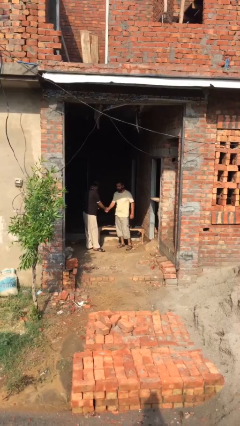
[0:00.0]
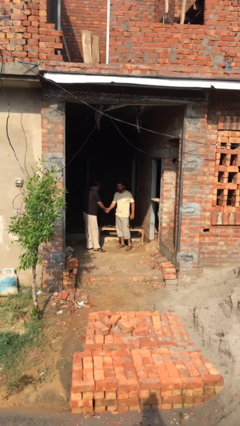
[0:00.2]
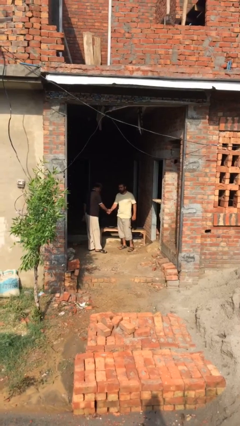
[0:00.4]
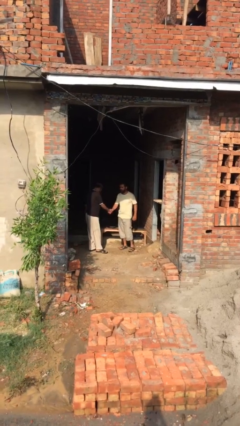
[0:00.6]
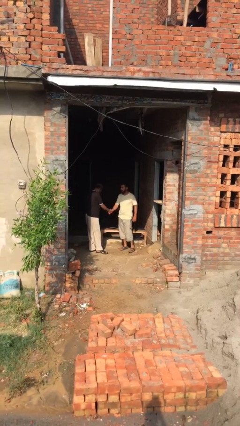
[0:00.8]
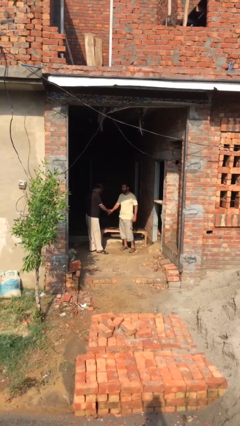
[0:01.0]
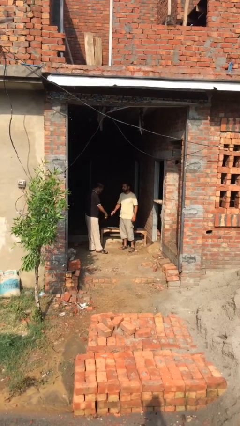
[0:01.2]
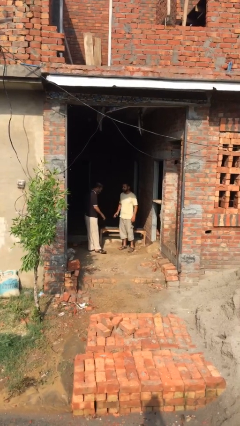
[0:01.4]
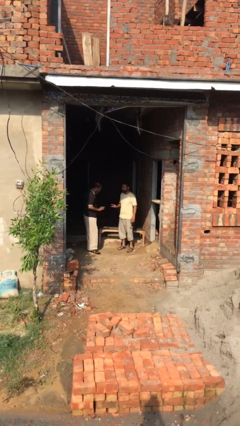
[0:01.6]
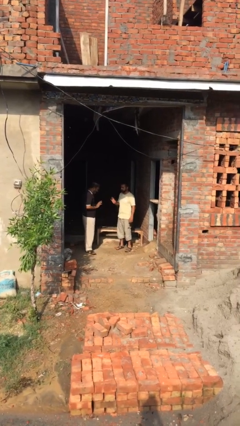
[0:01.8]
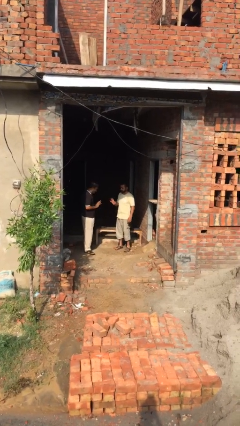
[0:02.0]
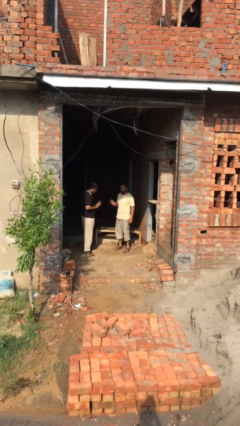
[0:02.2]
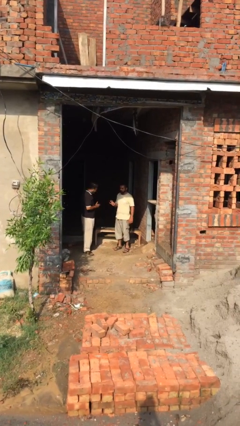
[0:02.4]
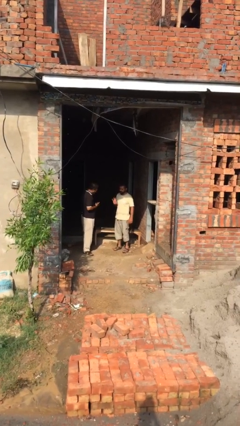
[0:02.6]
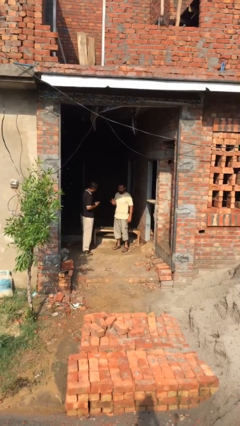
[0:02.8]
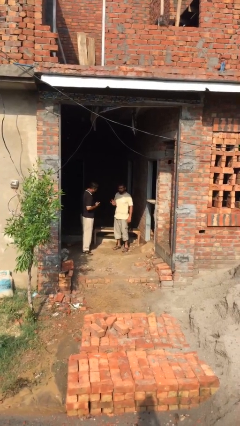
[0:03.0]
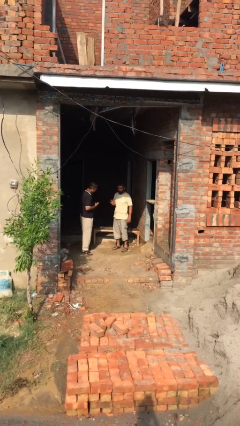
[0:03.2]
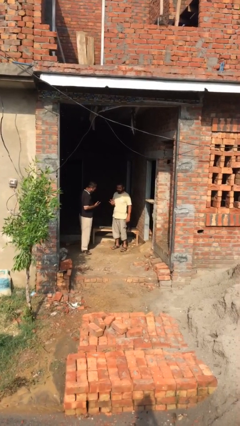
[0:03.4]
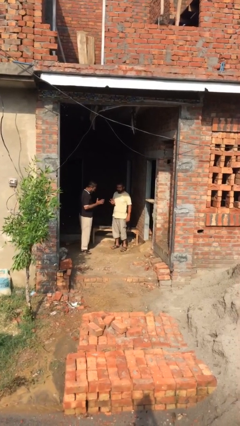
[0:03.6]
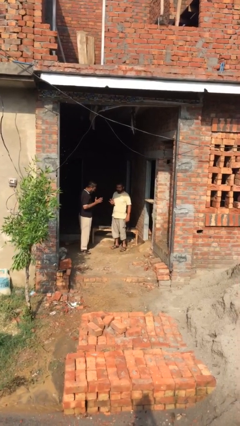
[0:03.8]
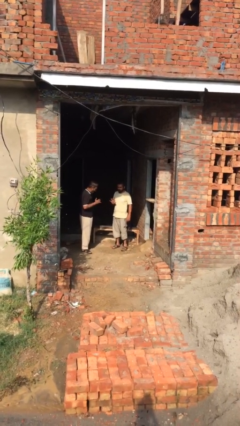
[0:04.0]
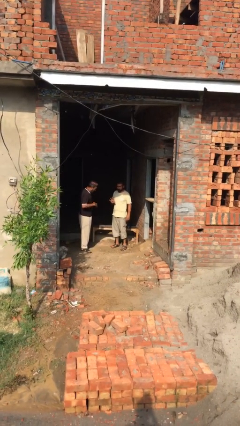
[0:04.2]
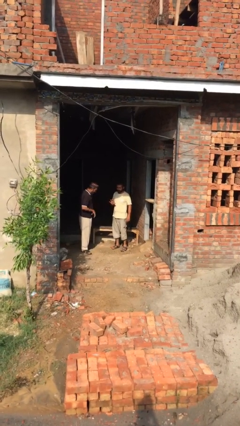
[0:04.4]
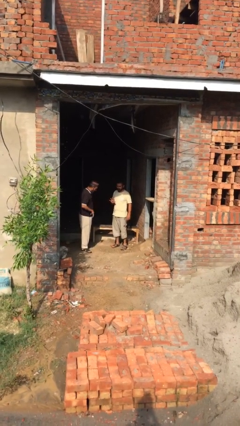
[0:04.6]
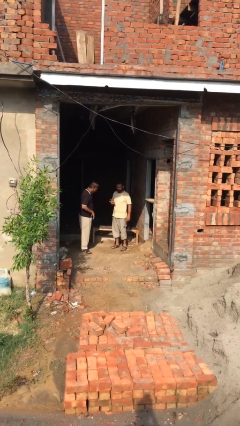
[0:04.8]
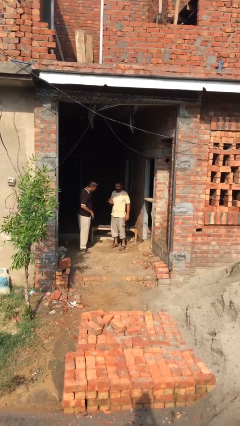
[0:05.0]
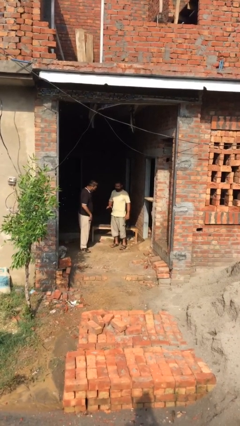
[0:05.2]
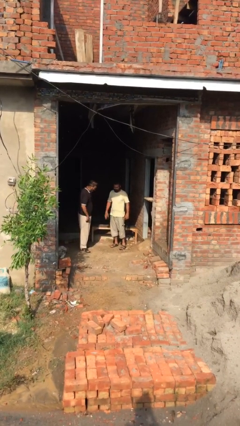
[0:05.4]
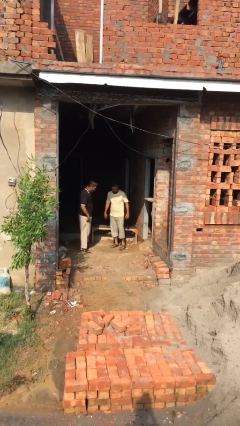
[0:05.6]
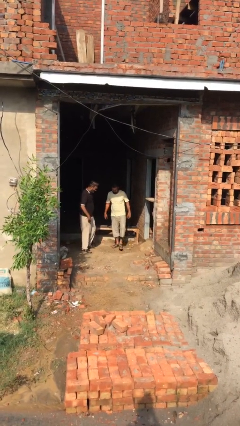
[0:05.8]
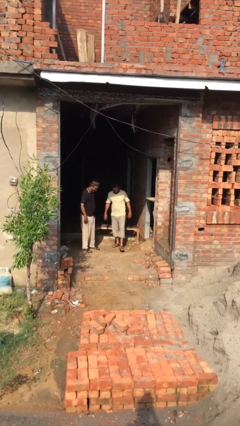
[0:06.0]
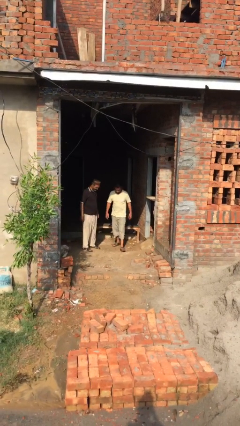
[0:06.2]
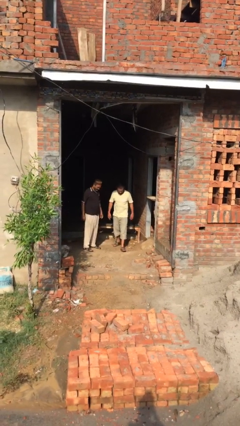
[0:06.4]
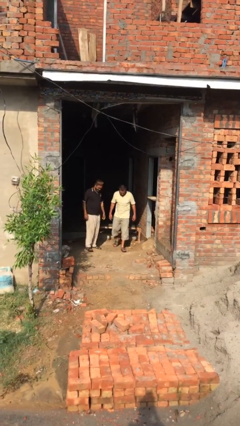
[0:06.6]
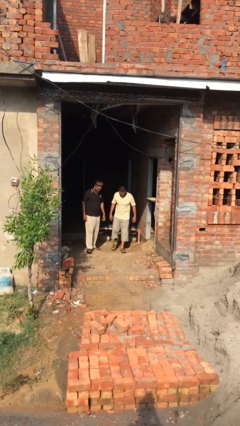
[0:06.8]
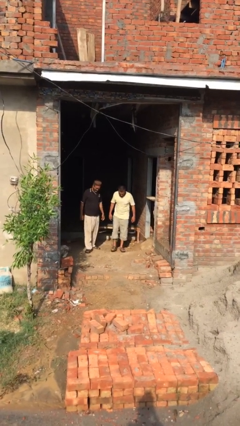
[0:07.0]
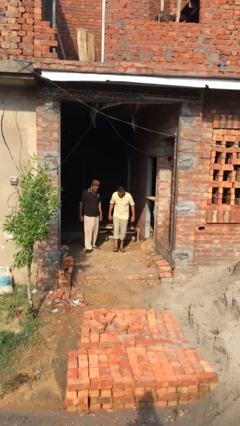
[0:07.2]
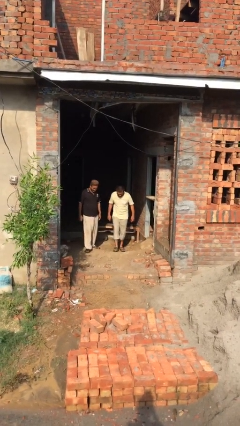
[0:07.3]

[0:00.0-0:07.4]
person talks to person

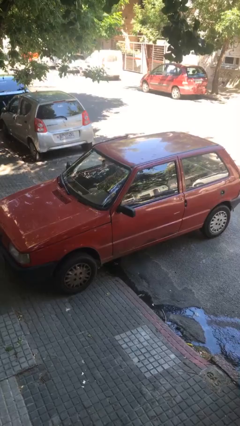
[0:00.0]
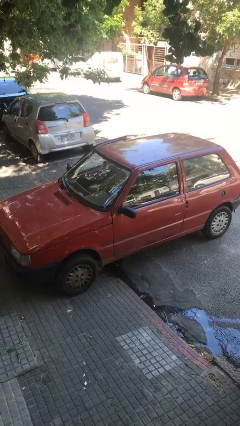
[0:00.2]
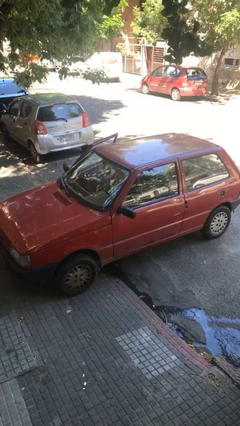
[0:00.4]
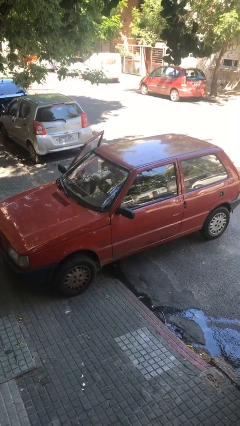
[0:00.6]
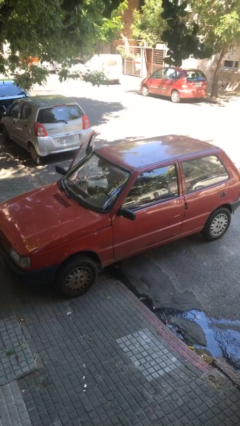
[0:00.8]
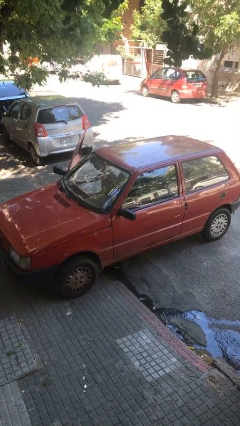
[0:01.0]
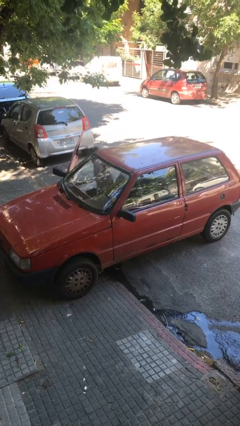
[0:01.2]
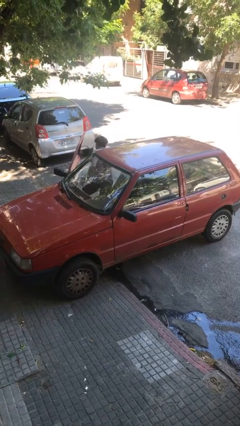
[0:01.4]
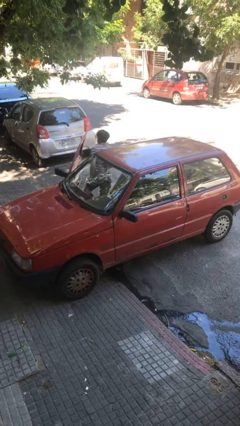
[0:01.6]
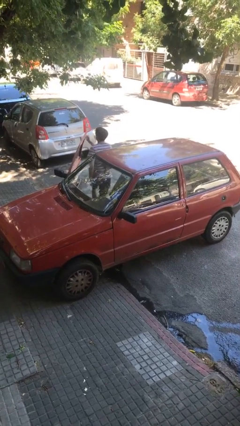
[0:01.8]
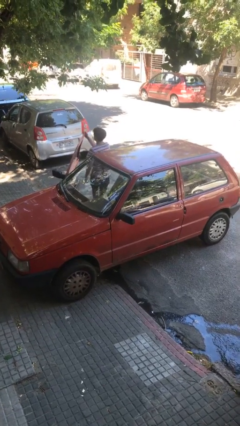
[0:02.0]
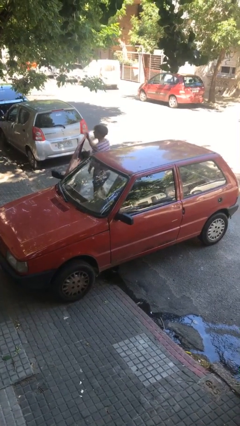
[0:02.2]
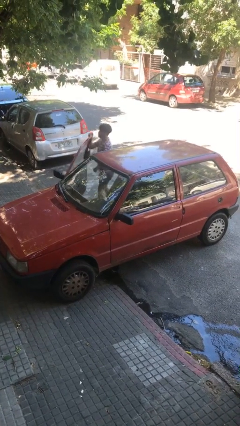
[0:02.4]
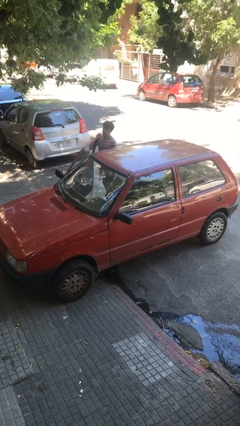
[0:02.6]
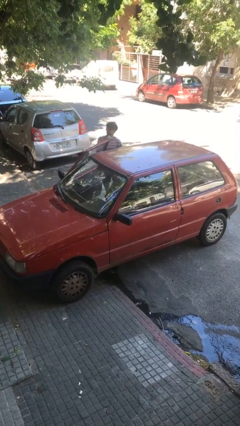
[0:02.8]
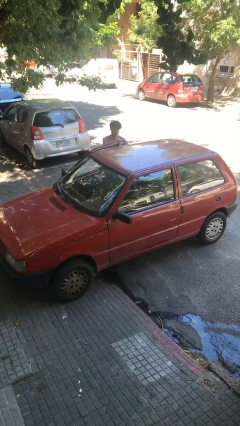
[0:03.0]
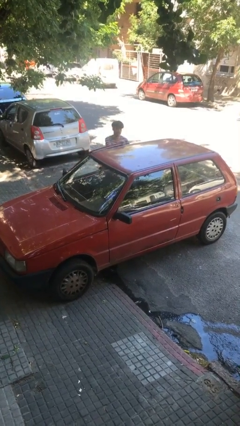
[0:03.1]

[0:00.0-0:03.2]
car drops off person

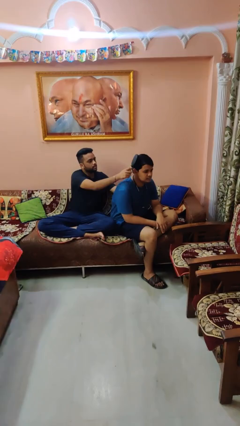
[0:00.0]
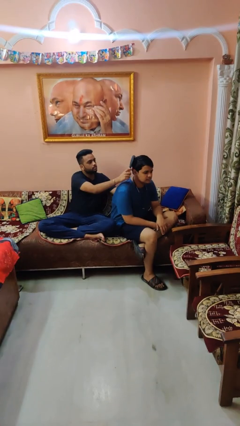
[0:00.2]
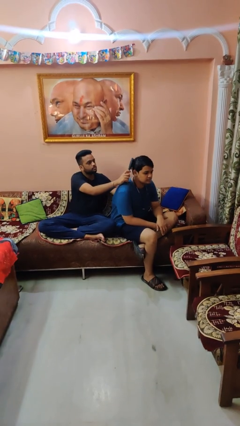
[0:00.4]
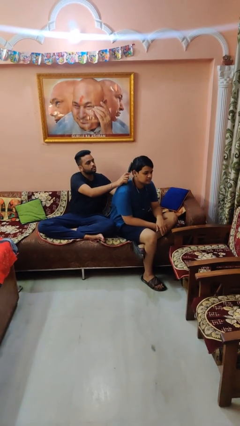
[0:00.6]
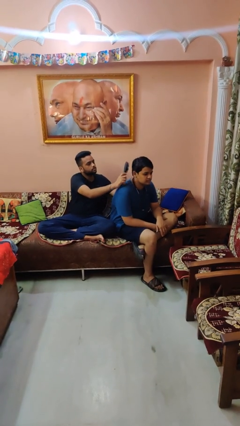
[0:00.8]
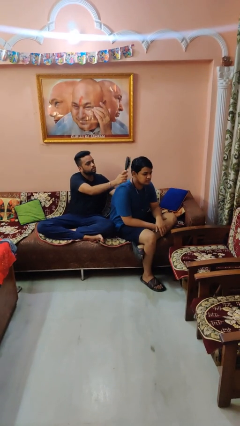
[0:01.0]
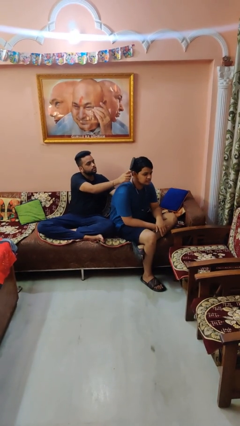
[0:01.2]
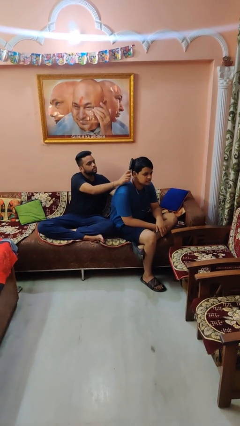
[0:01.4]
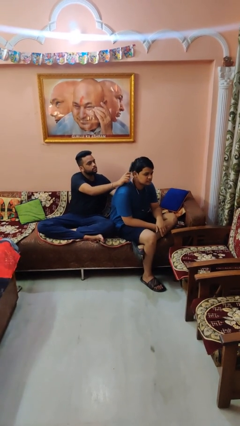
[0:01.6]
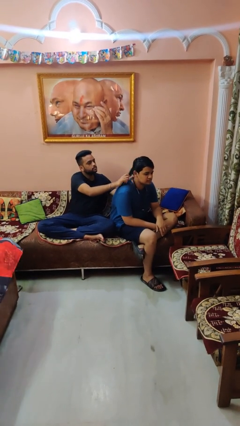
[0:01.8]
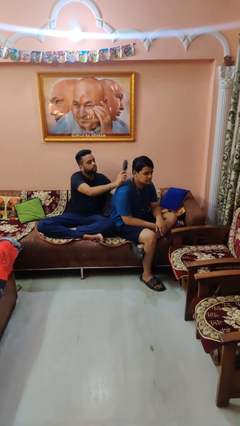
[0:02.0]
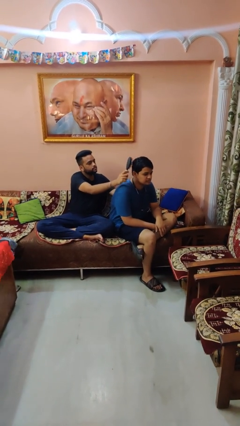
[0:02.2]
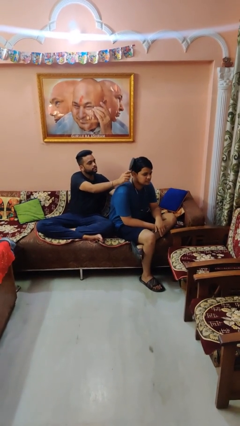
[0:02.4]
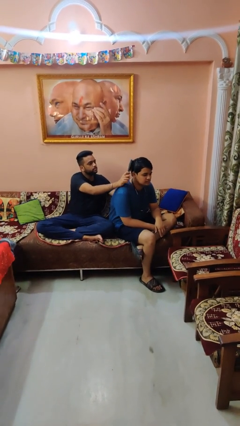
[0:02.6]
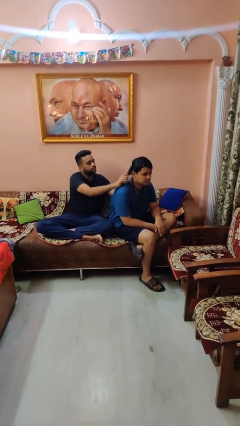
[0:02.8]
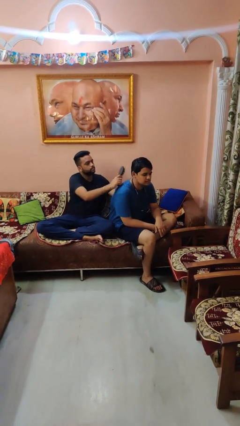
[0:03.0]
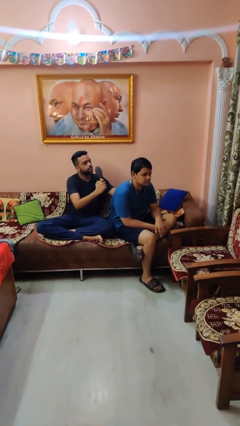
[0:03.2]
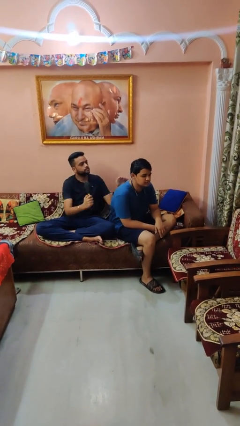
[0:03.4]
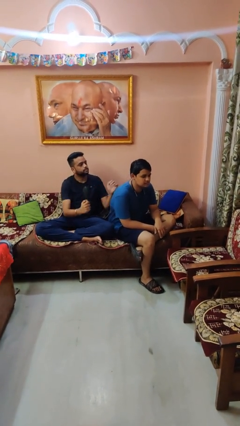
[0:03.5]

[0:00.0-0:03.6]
person brushes hair of person

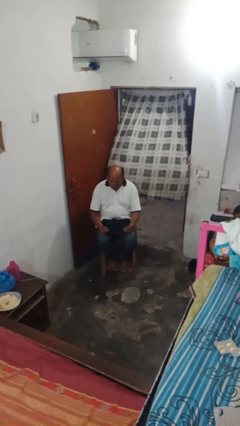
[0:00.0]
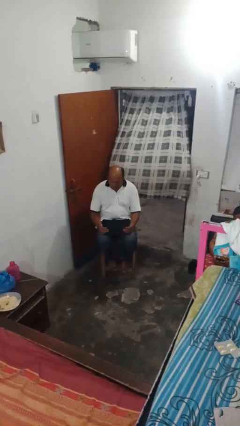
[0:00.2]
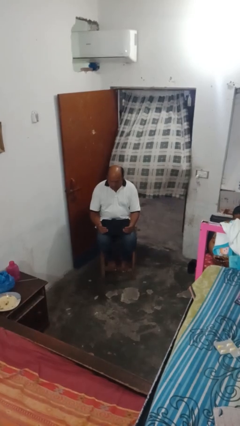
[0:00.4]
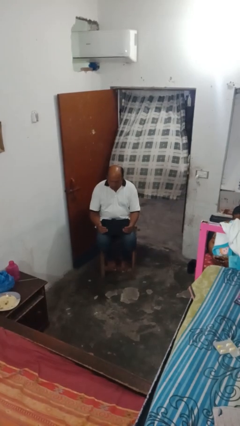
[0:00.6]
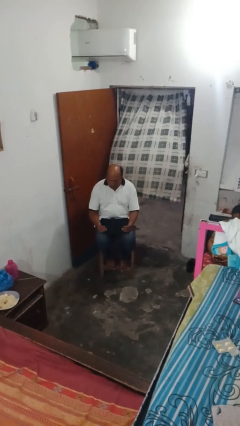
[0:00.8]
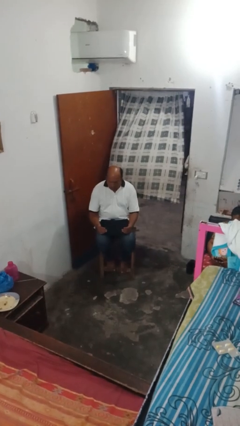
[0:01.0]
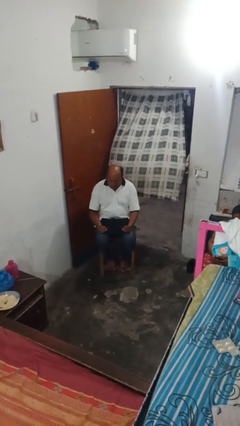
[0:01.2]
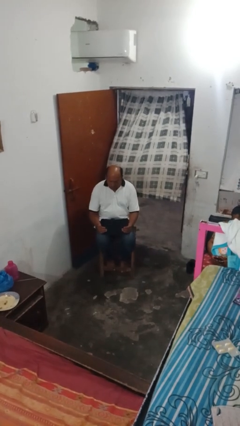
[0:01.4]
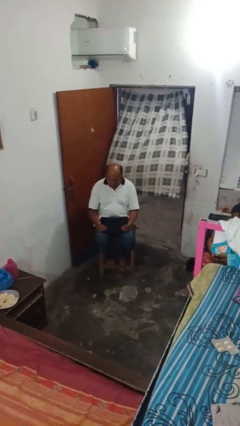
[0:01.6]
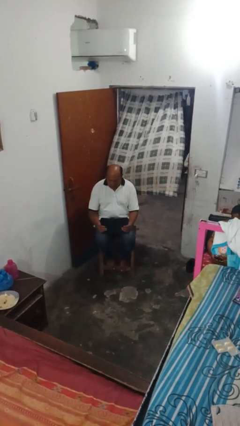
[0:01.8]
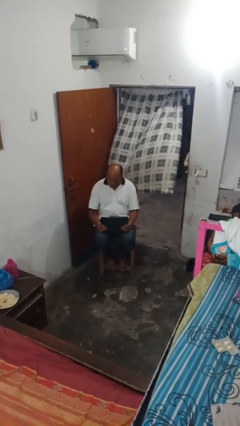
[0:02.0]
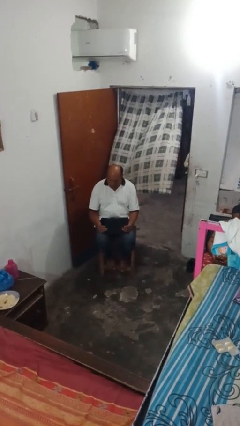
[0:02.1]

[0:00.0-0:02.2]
person opens laptop

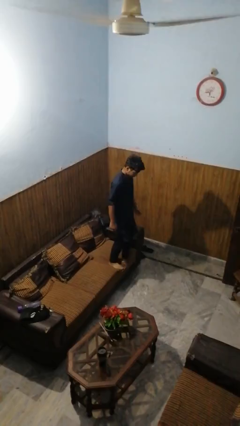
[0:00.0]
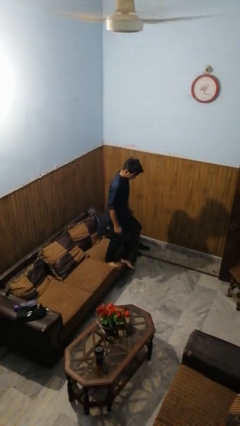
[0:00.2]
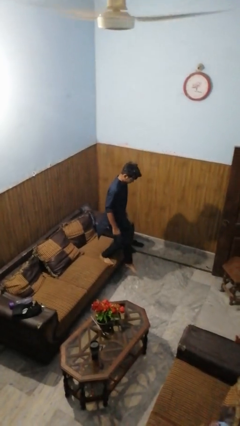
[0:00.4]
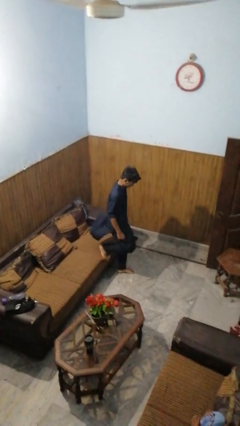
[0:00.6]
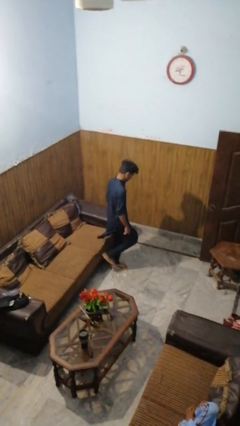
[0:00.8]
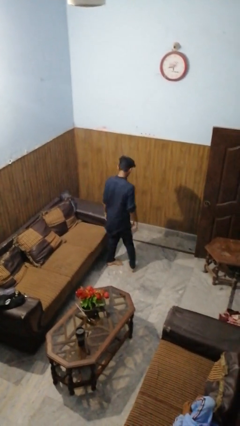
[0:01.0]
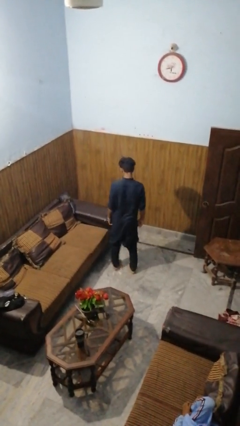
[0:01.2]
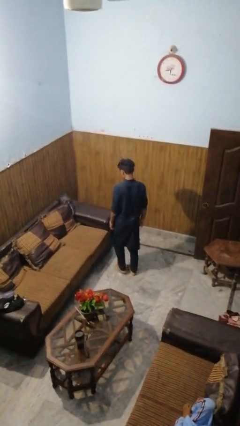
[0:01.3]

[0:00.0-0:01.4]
person climbs off couch
